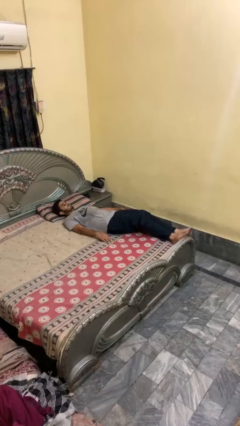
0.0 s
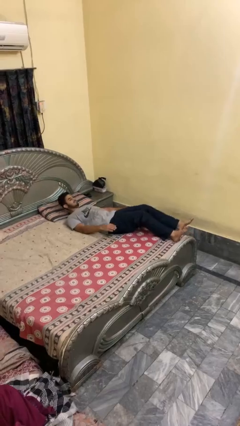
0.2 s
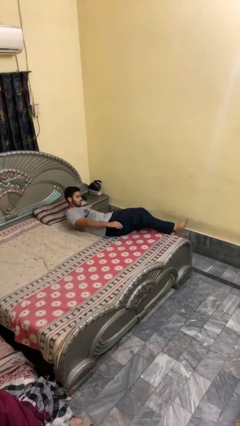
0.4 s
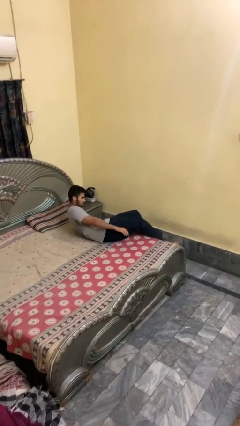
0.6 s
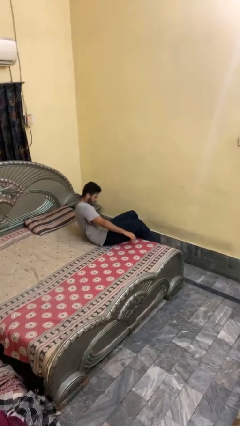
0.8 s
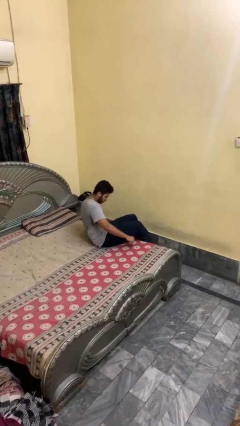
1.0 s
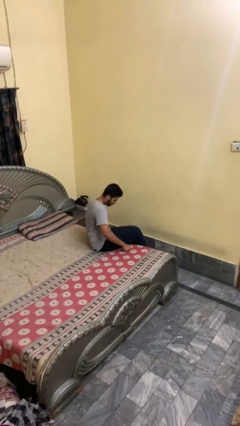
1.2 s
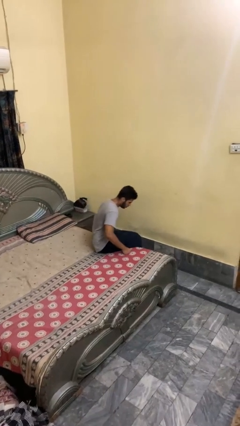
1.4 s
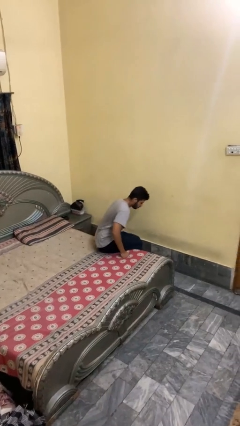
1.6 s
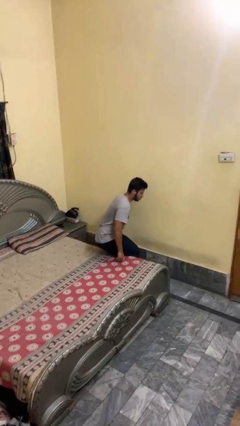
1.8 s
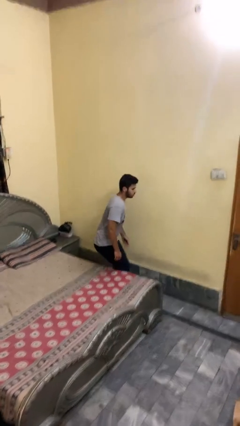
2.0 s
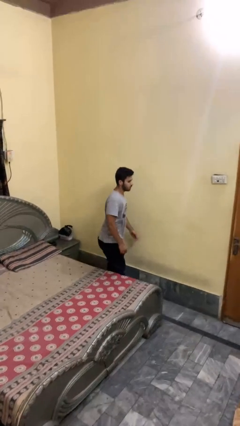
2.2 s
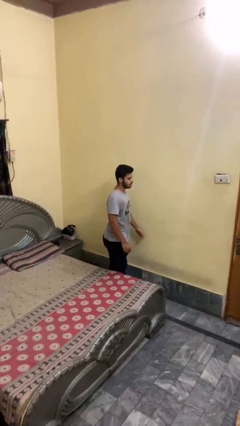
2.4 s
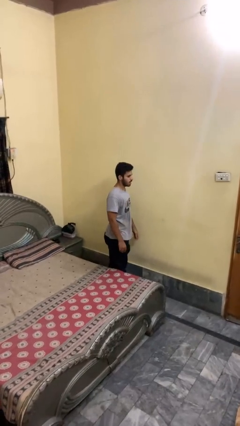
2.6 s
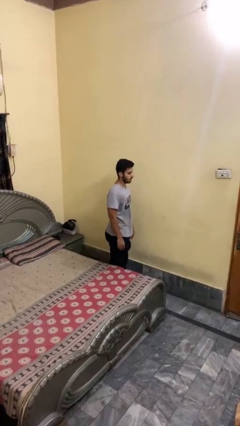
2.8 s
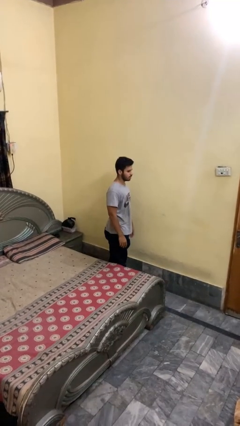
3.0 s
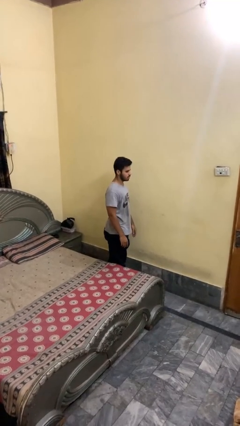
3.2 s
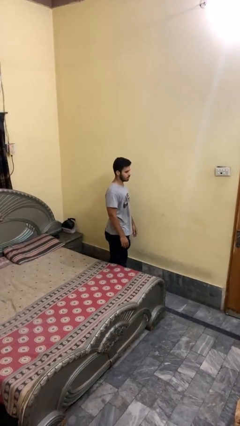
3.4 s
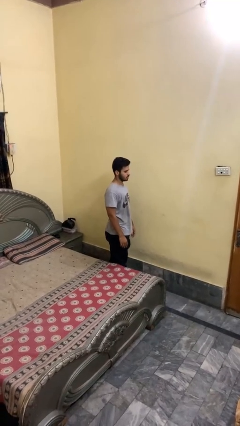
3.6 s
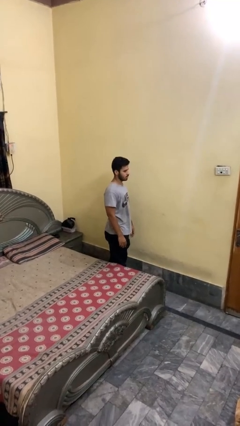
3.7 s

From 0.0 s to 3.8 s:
person stands up

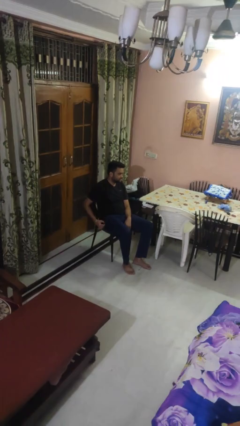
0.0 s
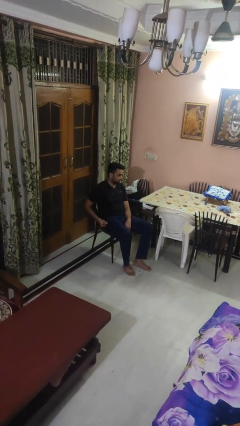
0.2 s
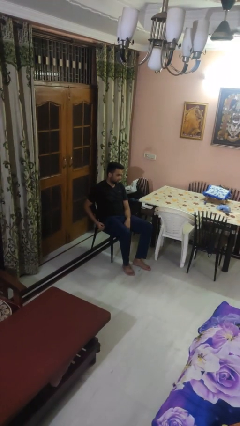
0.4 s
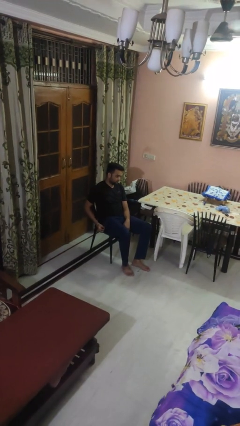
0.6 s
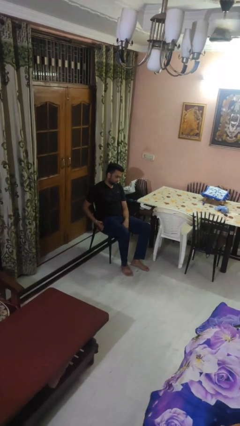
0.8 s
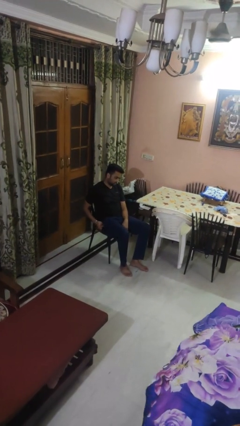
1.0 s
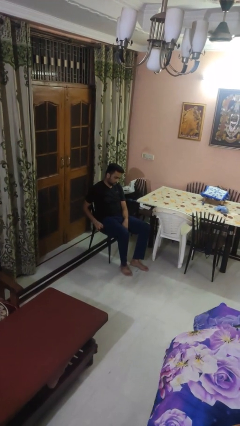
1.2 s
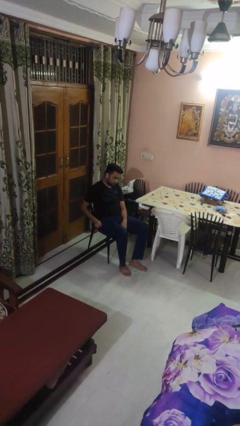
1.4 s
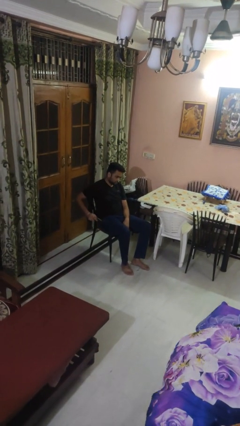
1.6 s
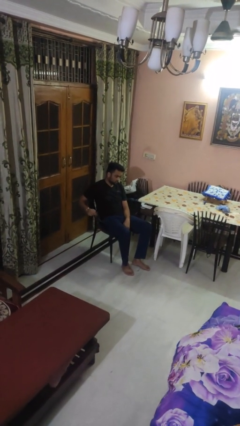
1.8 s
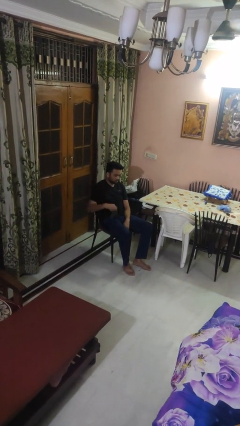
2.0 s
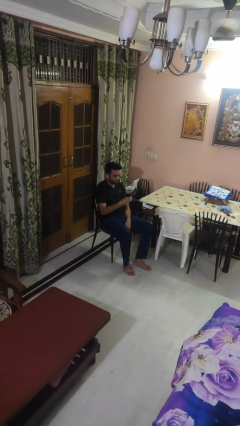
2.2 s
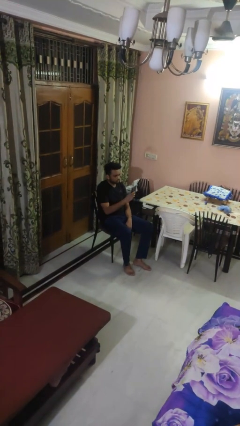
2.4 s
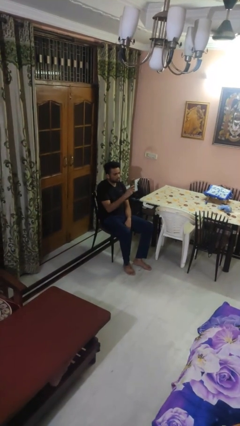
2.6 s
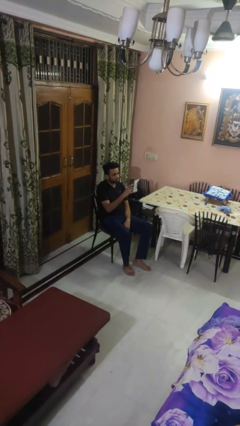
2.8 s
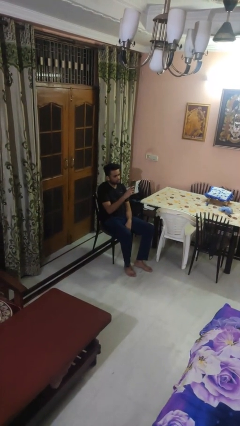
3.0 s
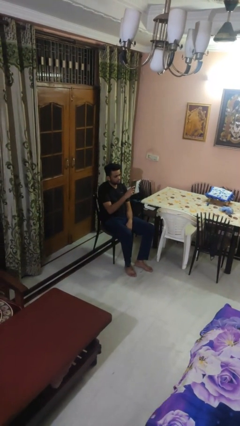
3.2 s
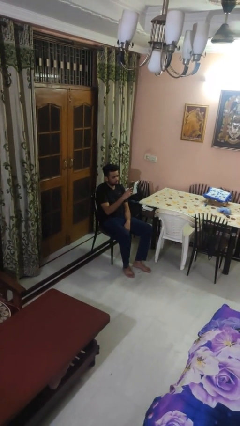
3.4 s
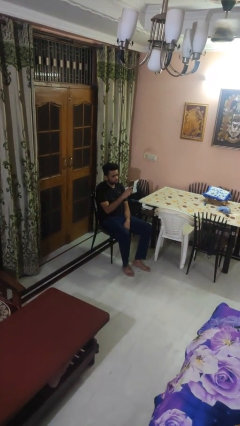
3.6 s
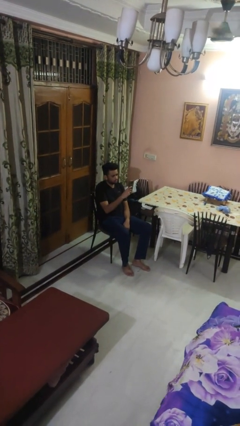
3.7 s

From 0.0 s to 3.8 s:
person takes phone from pocket

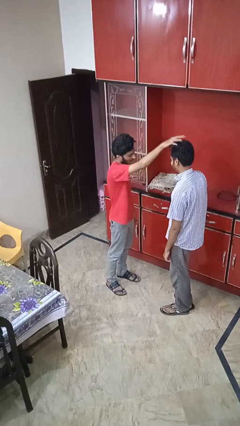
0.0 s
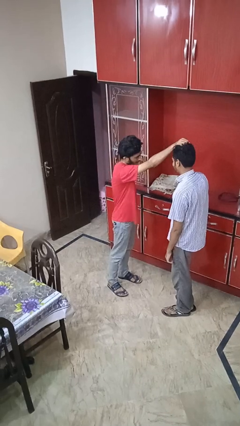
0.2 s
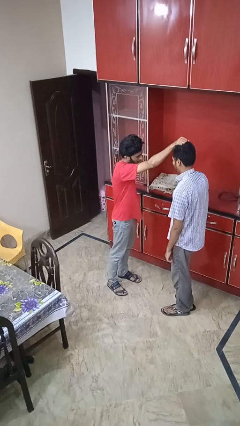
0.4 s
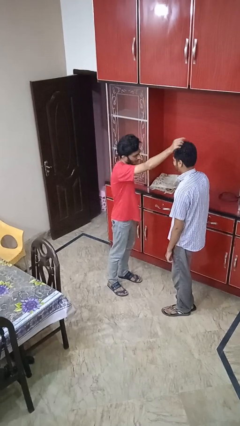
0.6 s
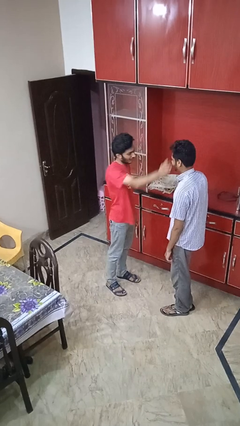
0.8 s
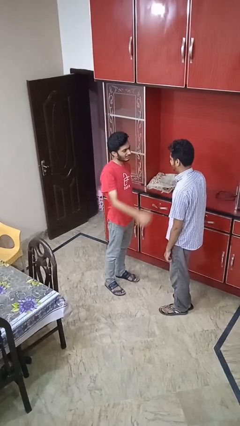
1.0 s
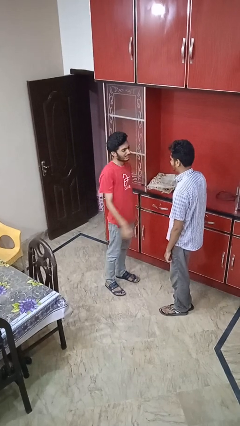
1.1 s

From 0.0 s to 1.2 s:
person grabs person by hair

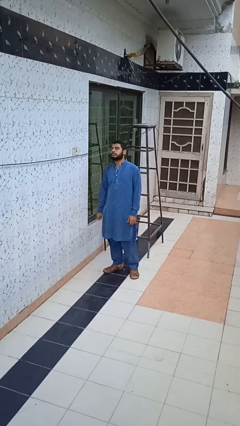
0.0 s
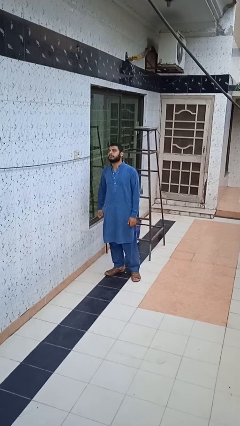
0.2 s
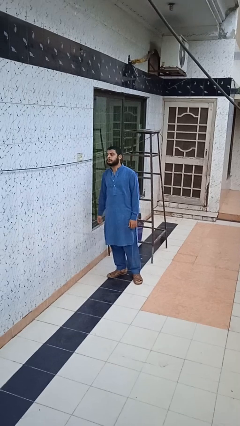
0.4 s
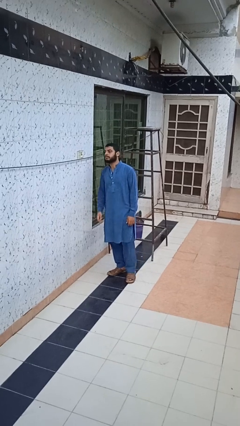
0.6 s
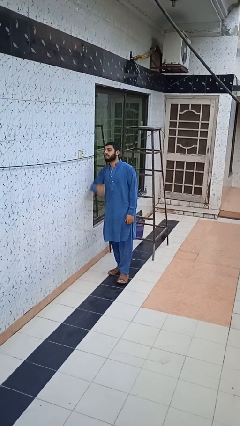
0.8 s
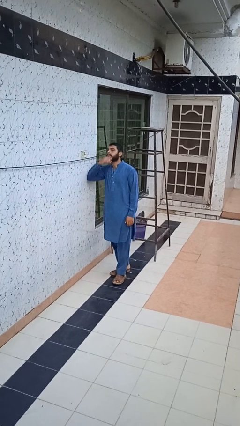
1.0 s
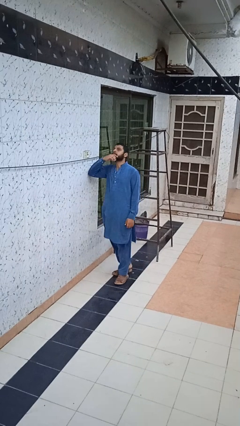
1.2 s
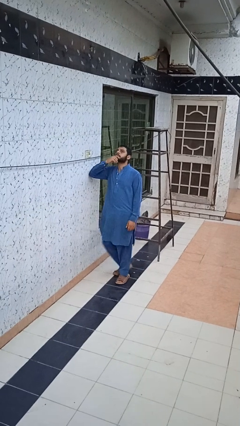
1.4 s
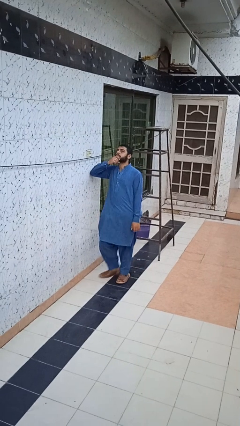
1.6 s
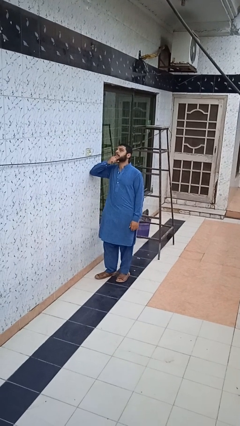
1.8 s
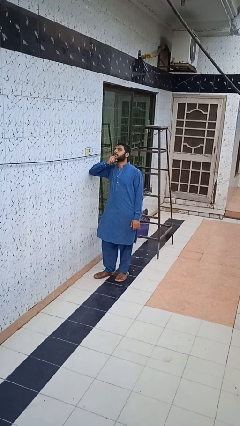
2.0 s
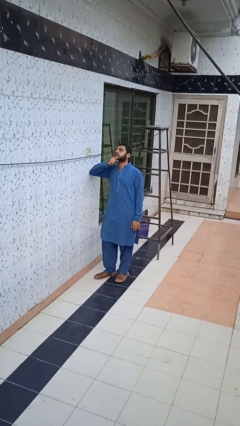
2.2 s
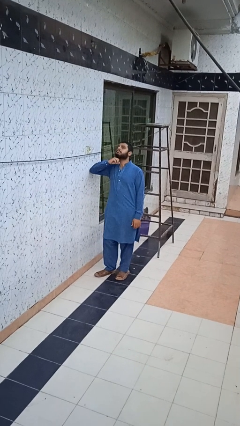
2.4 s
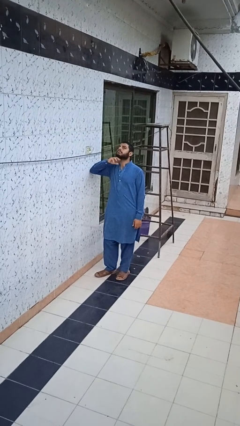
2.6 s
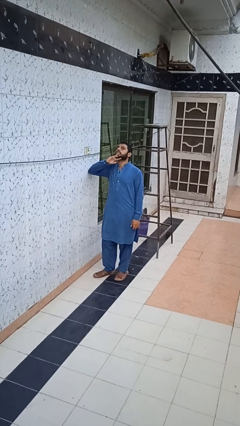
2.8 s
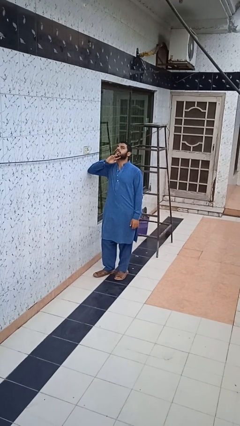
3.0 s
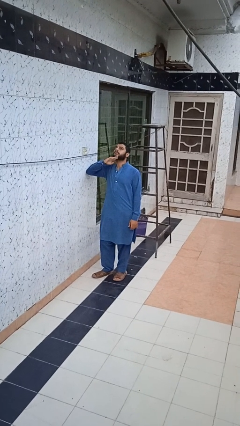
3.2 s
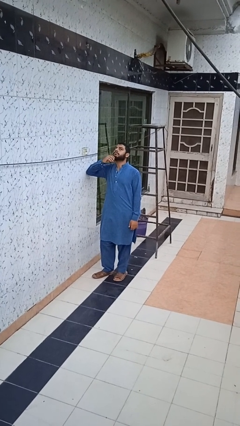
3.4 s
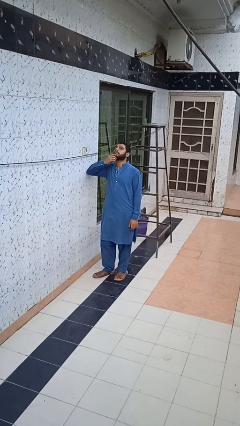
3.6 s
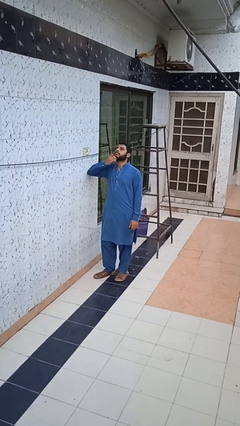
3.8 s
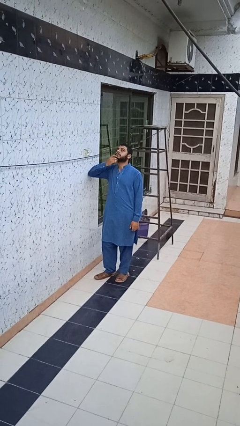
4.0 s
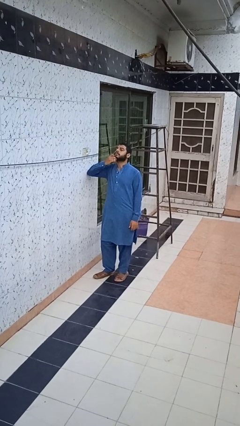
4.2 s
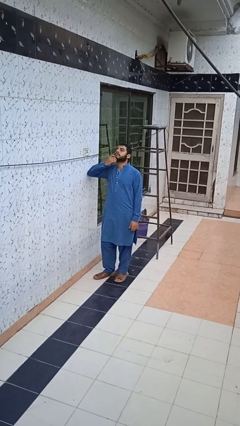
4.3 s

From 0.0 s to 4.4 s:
person strokes chin

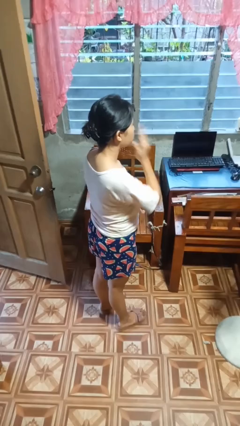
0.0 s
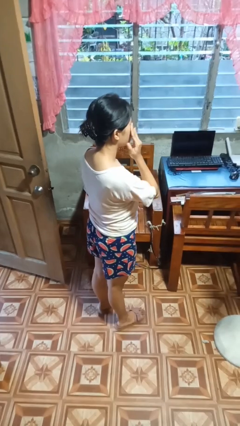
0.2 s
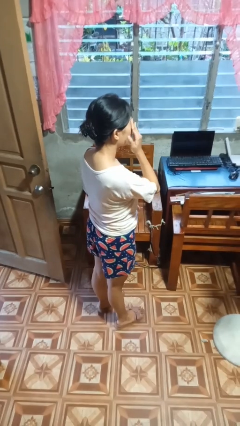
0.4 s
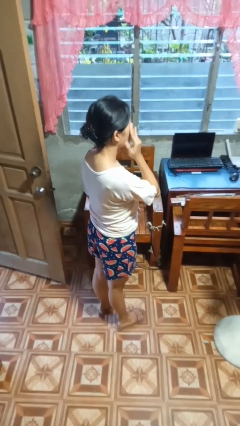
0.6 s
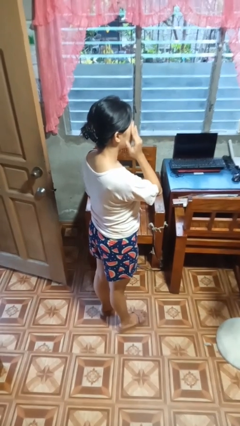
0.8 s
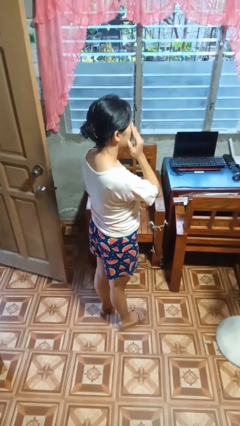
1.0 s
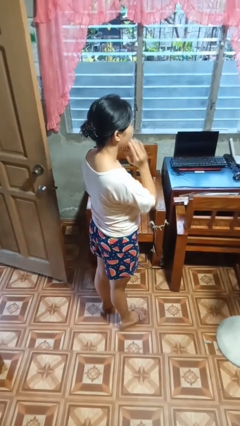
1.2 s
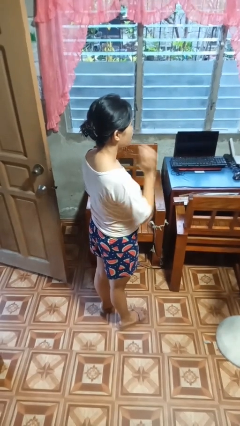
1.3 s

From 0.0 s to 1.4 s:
person rubs eyes

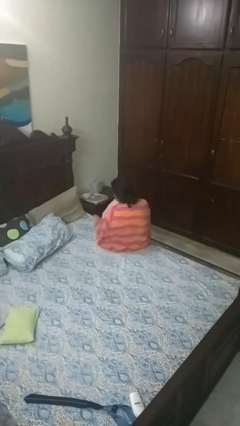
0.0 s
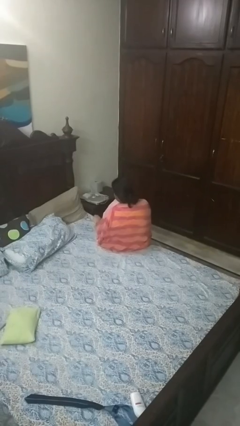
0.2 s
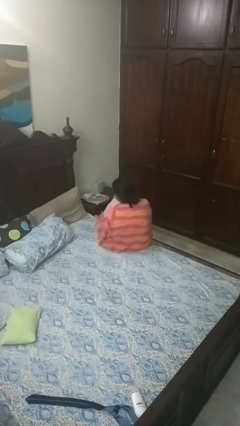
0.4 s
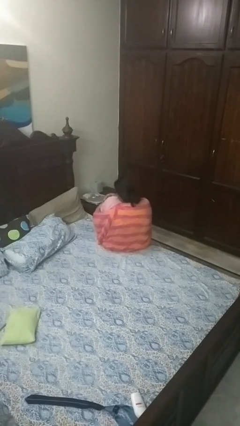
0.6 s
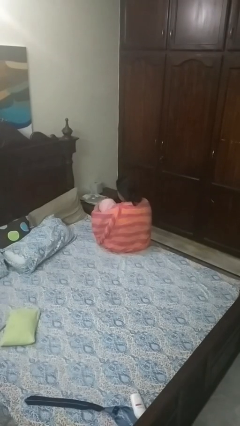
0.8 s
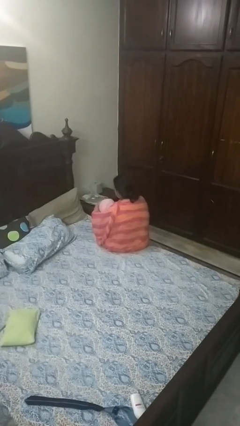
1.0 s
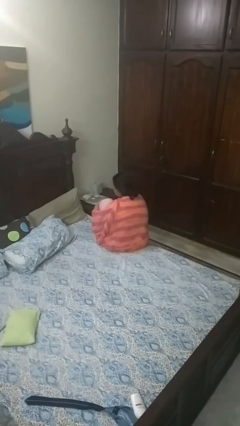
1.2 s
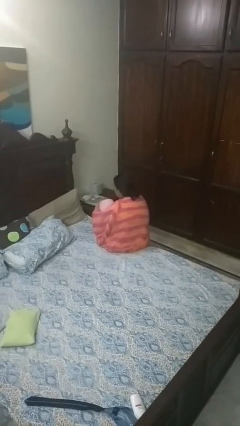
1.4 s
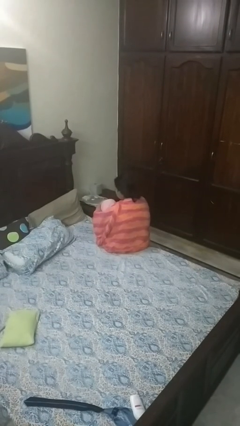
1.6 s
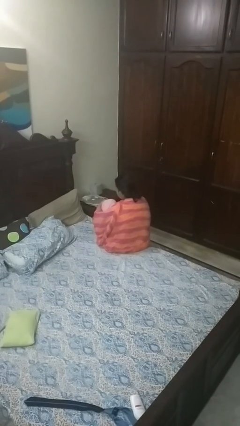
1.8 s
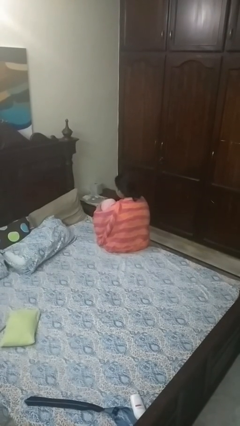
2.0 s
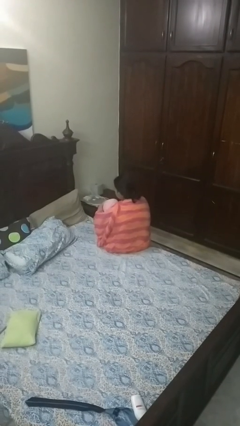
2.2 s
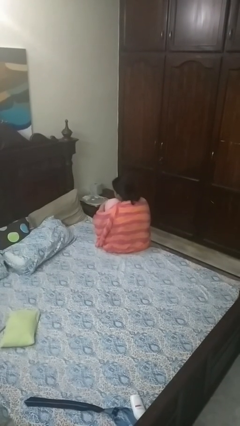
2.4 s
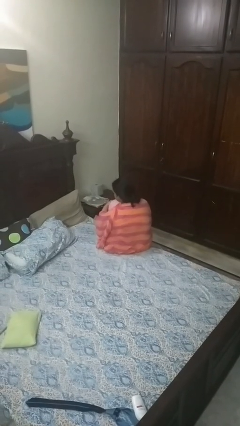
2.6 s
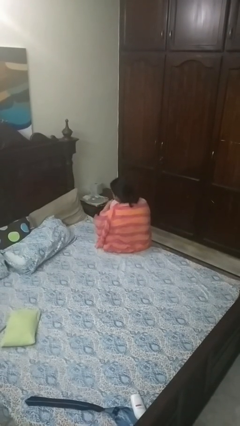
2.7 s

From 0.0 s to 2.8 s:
person rubs foot

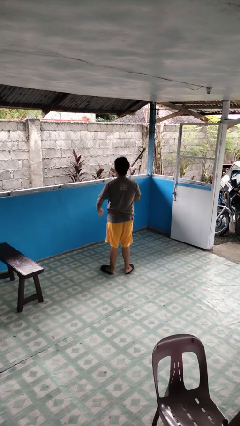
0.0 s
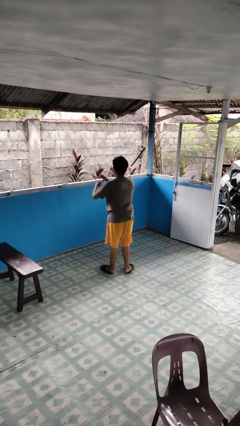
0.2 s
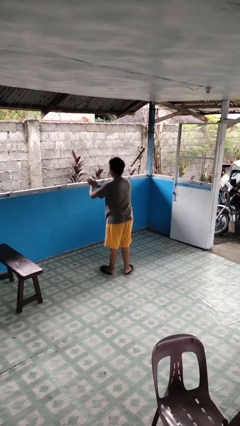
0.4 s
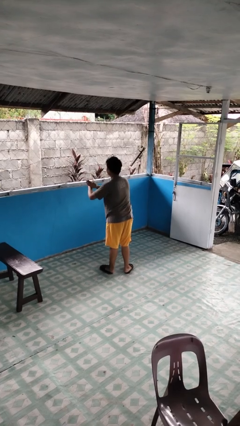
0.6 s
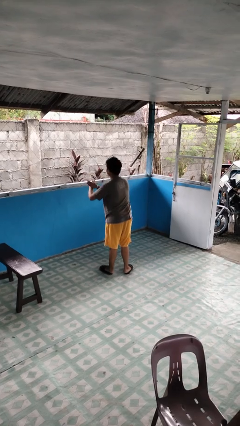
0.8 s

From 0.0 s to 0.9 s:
person gestures arms x
